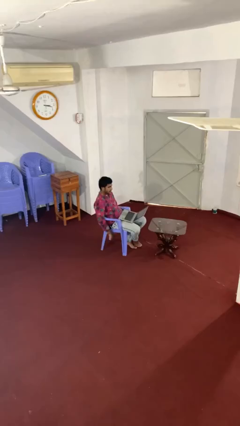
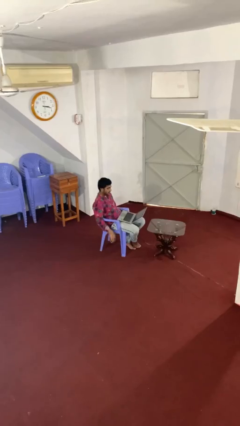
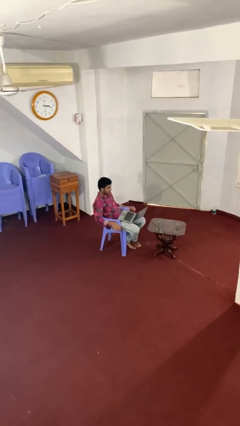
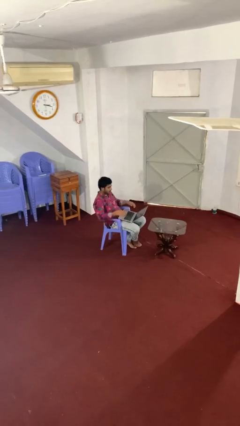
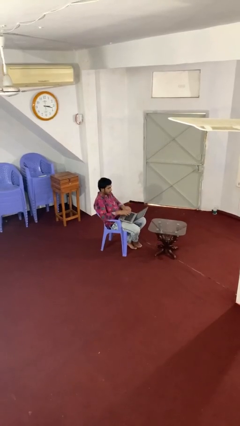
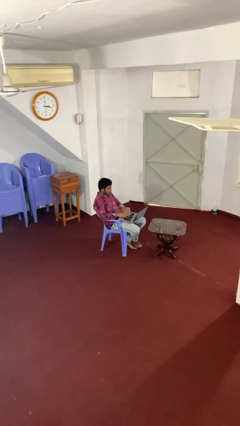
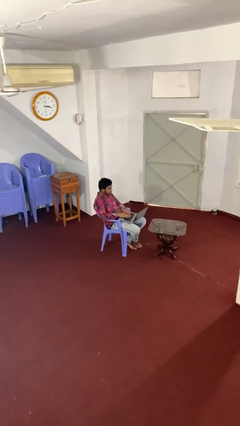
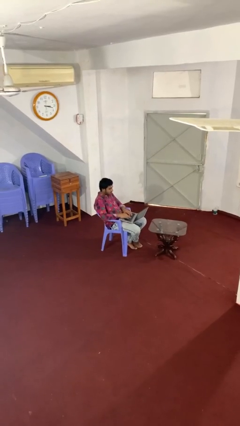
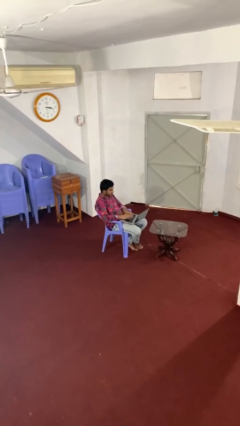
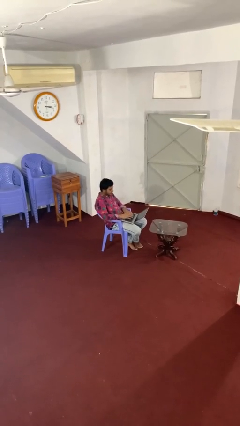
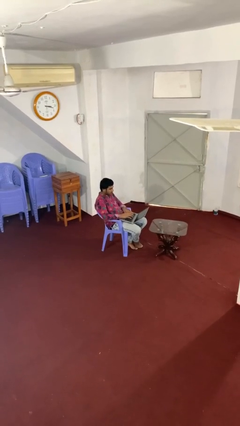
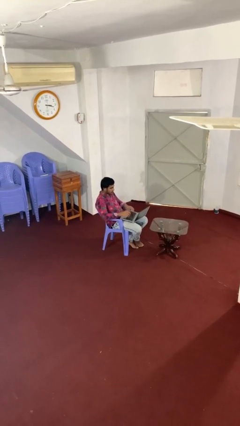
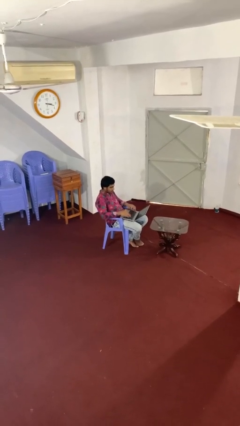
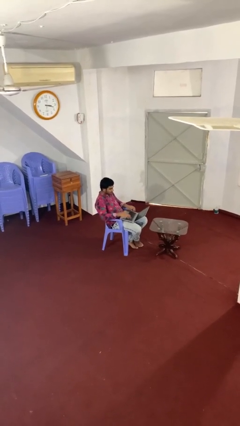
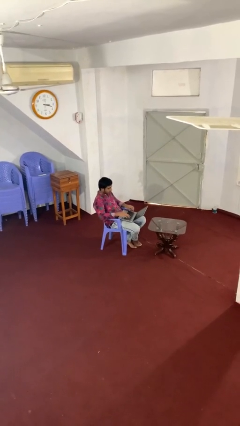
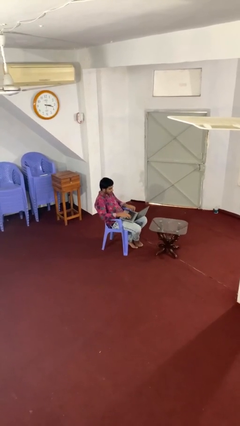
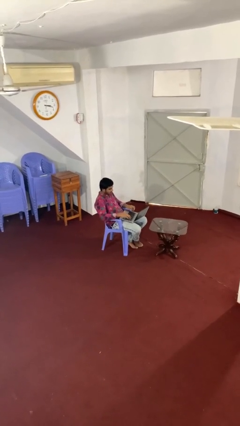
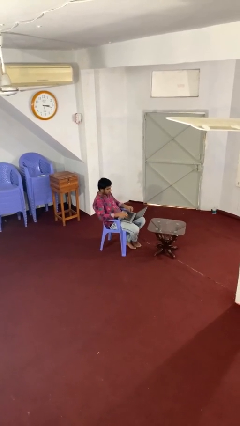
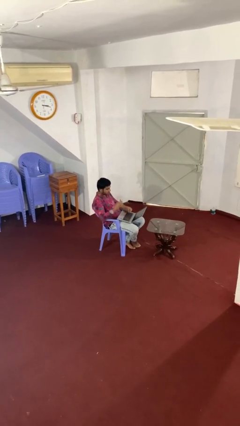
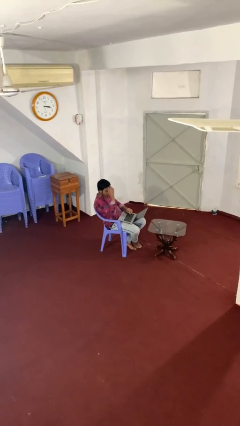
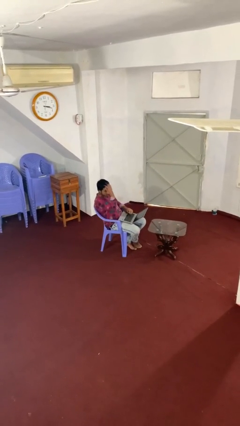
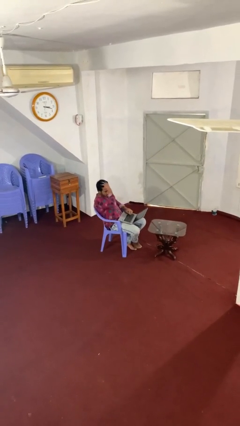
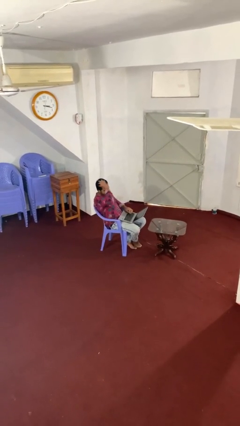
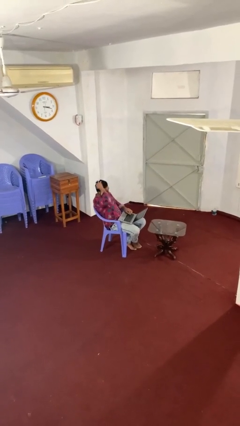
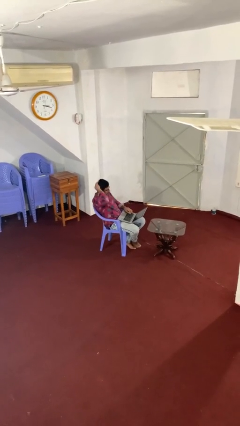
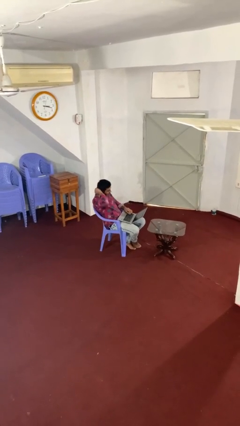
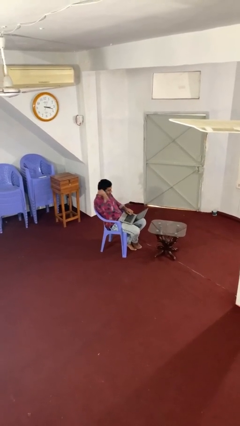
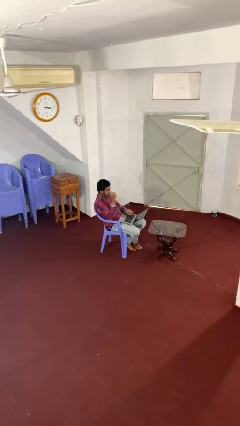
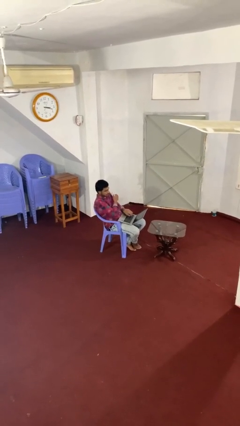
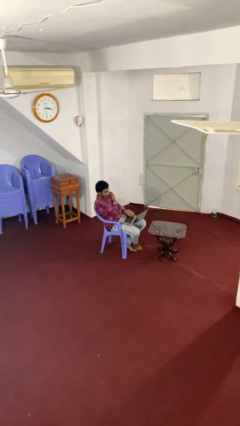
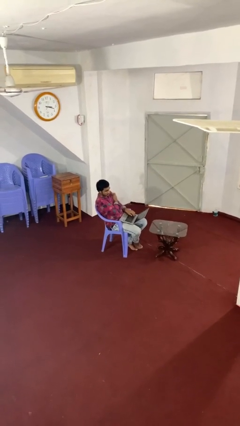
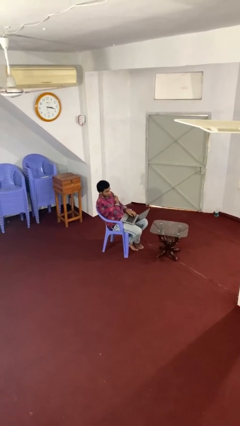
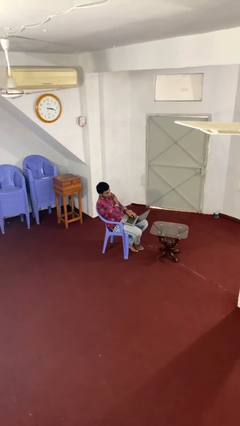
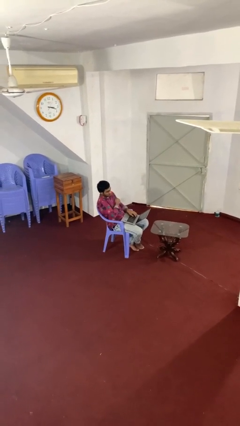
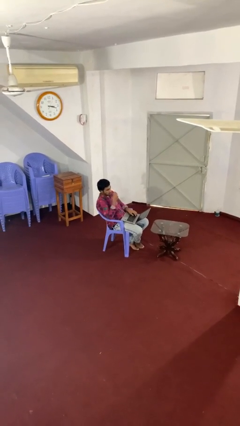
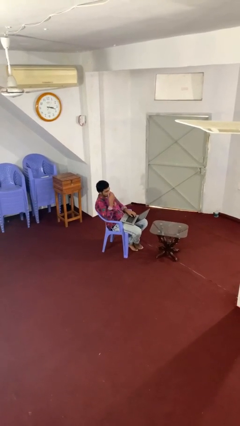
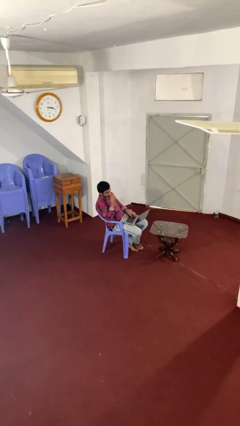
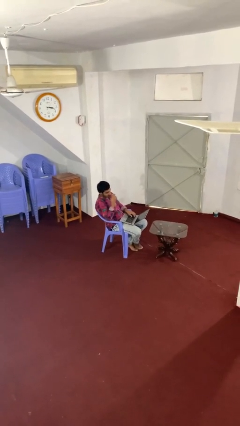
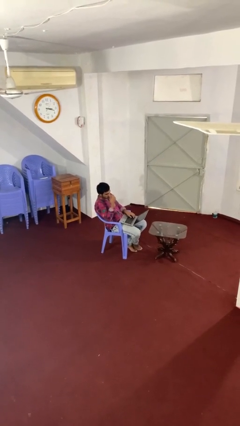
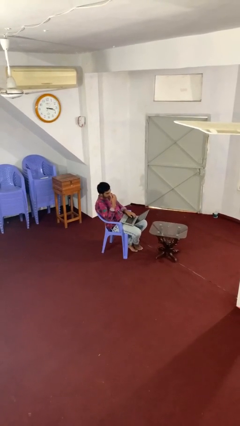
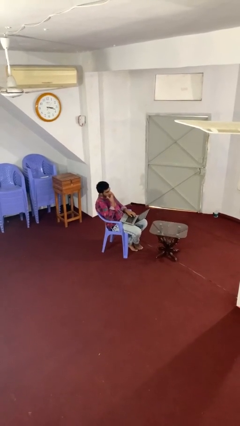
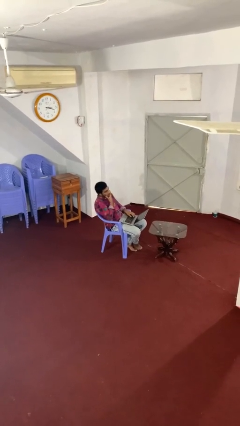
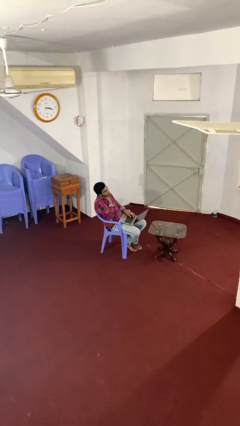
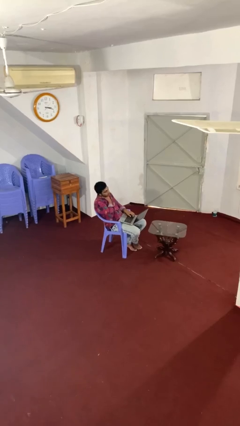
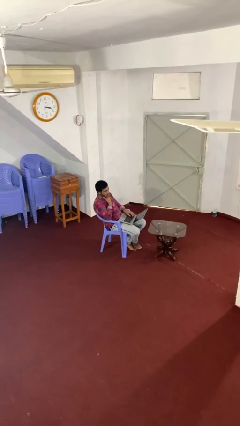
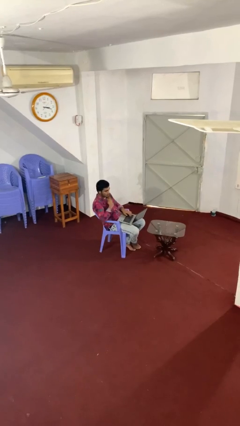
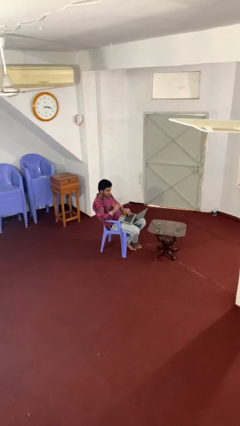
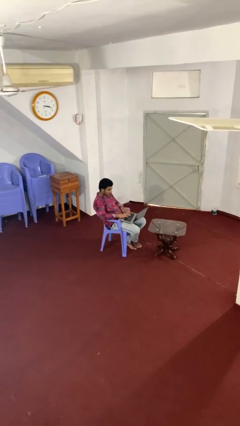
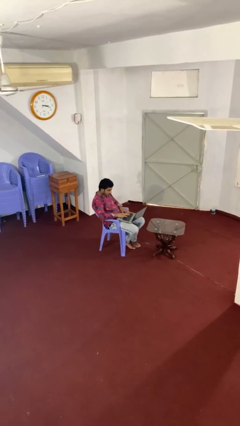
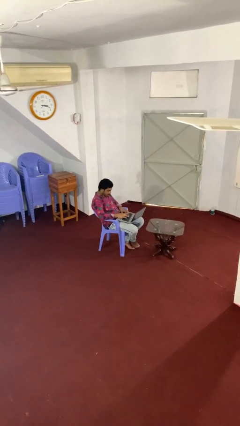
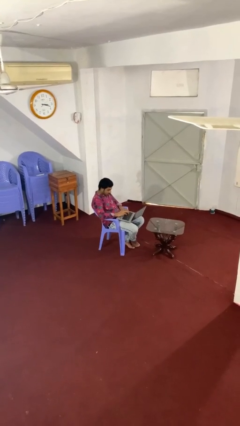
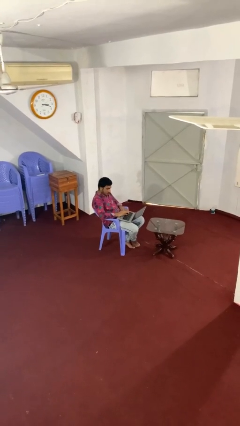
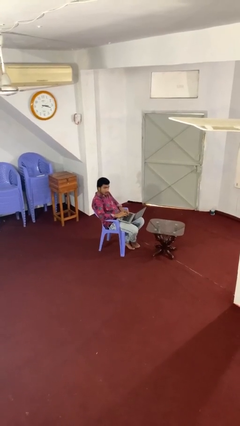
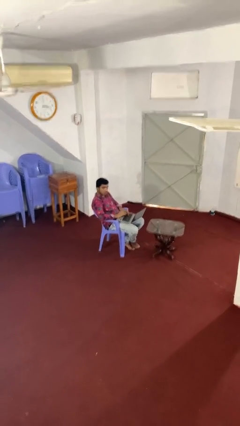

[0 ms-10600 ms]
person interacts with laptop

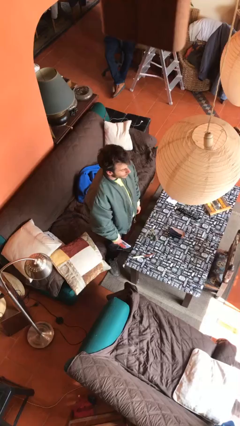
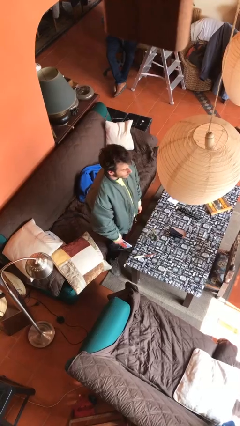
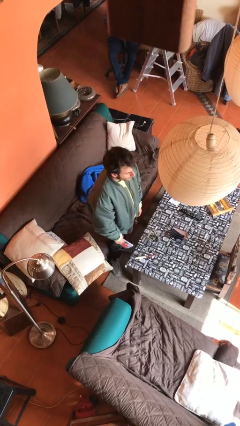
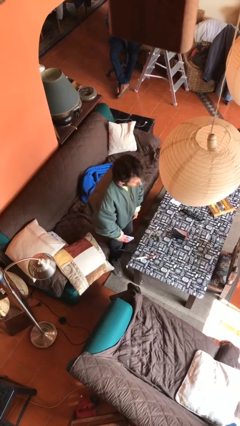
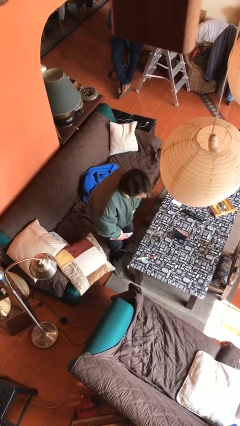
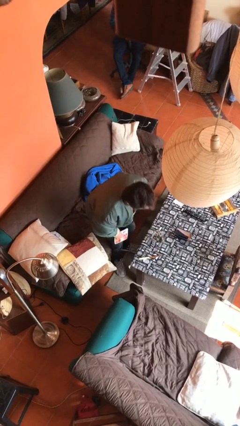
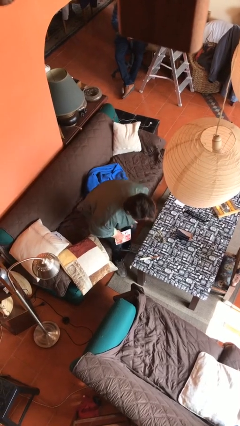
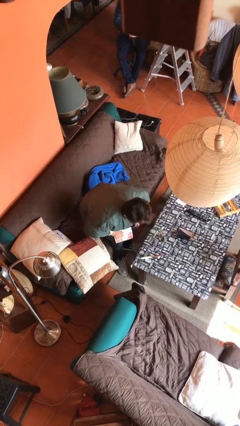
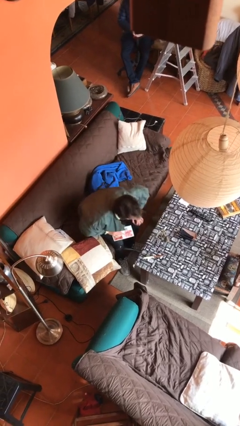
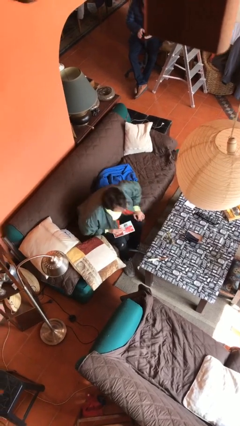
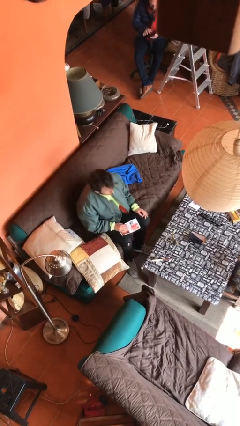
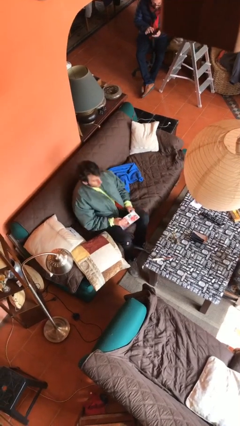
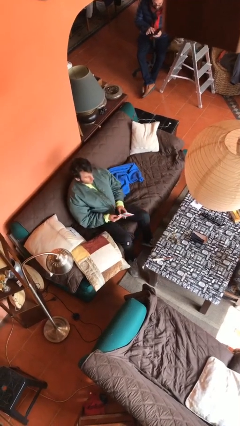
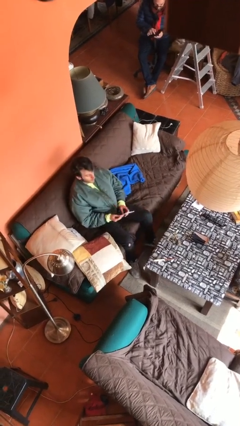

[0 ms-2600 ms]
person sits down

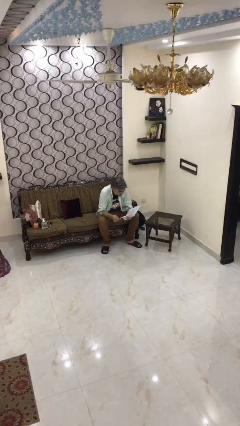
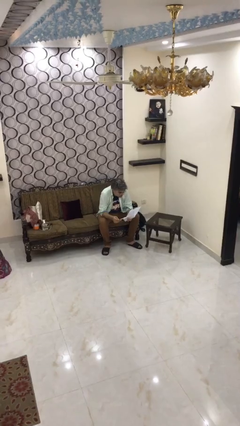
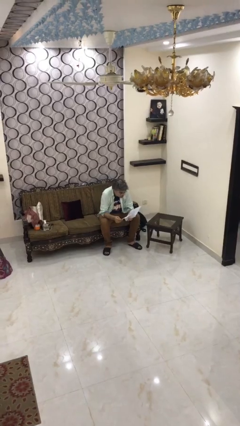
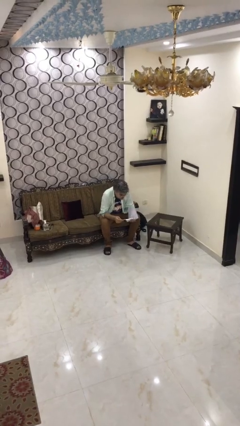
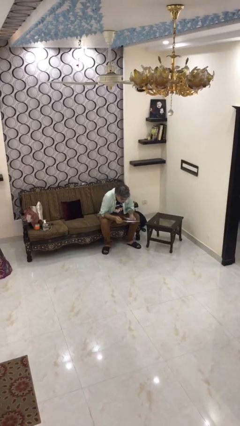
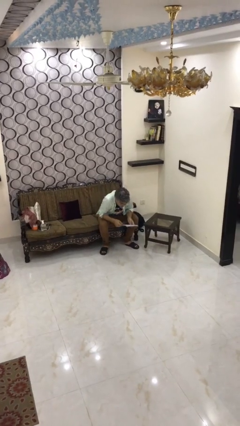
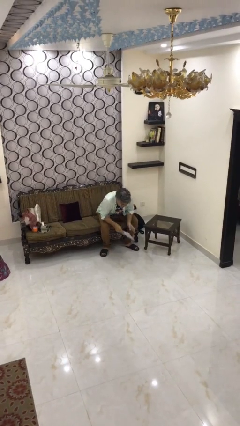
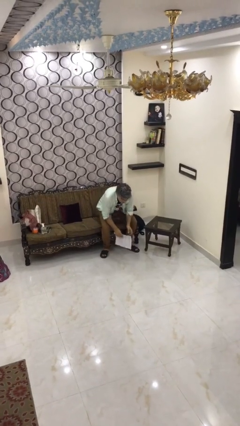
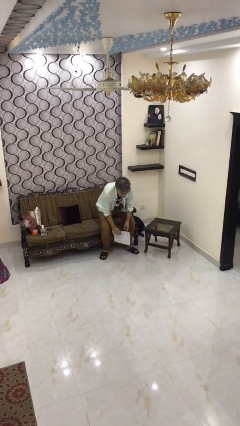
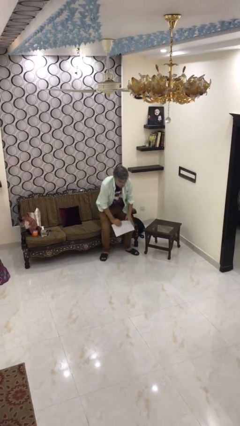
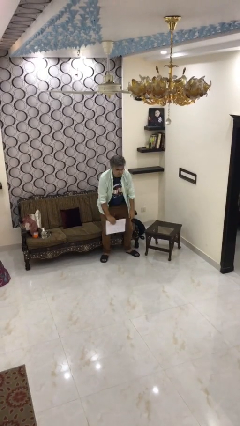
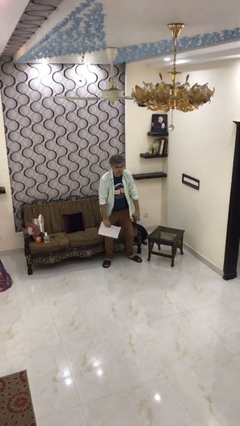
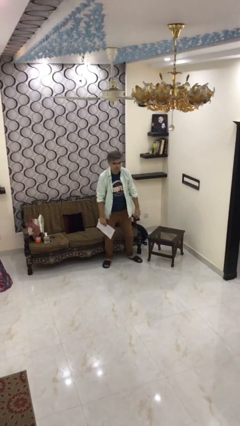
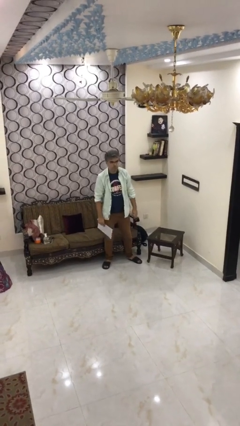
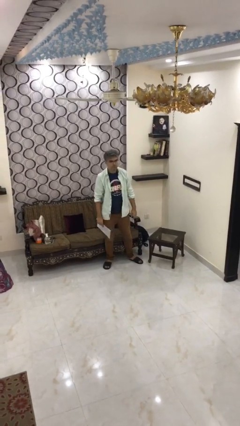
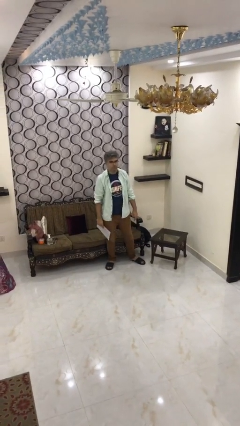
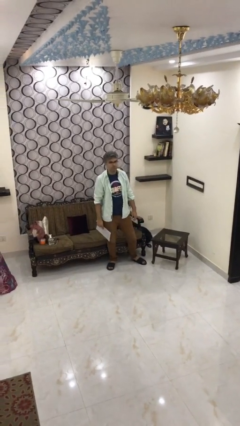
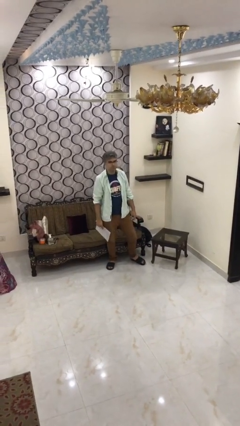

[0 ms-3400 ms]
person stands up

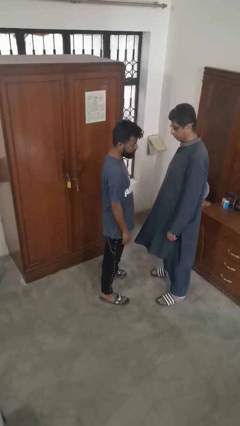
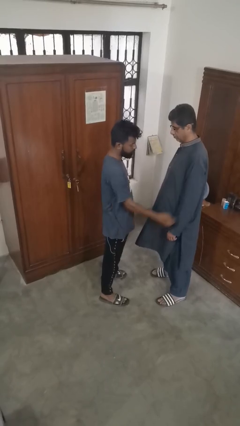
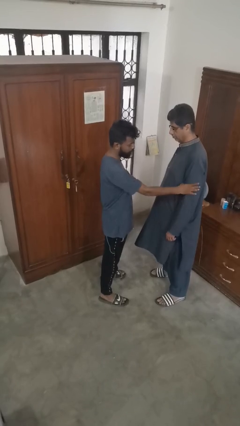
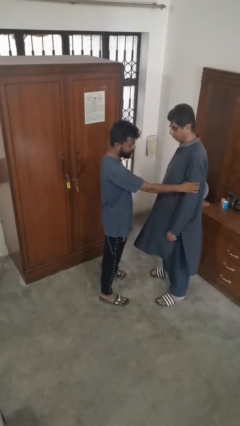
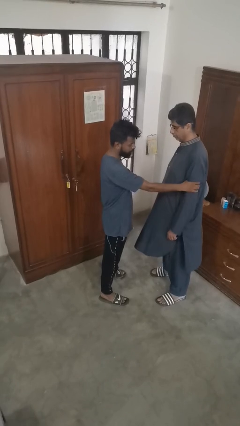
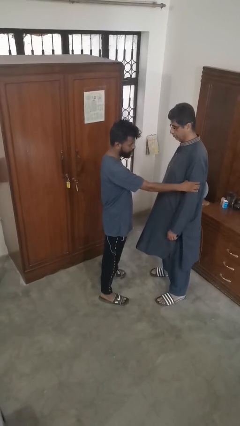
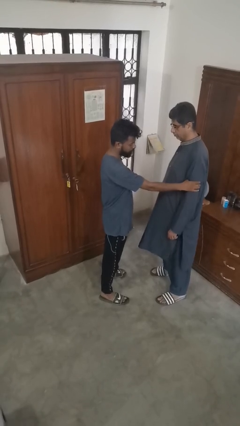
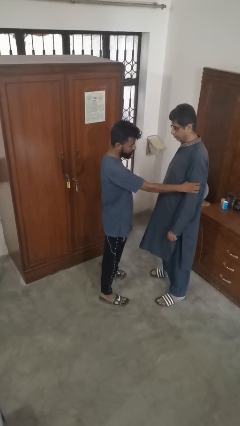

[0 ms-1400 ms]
person grabs person by bicep
